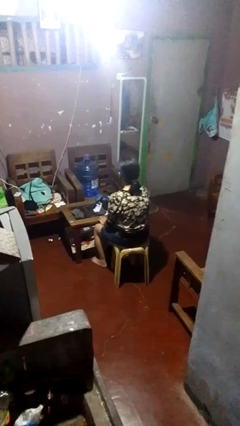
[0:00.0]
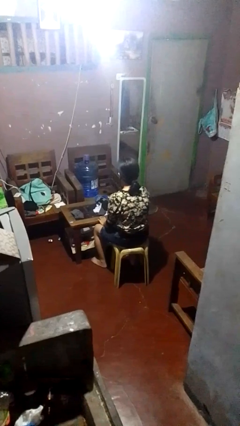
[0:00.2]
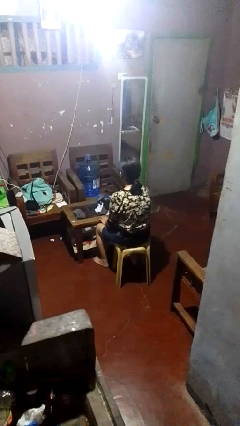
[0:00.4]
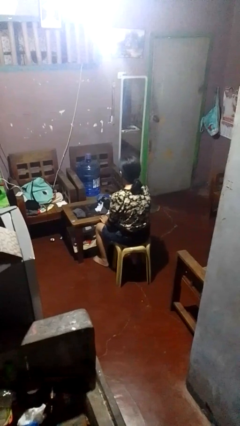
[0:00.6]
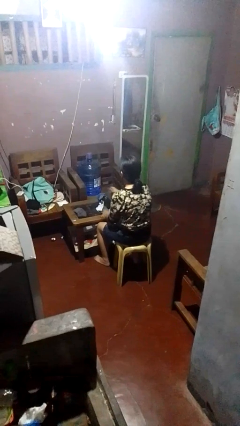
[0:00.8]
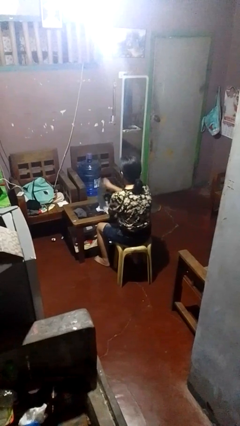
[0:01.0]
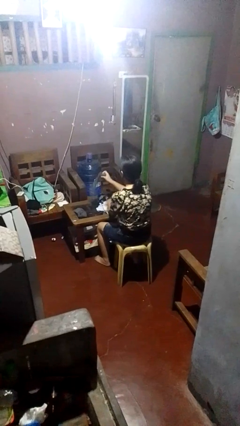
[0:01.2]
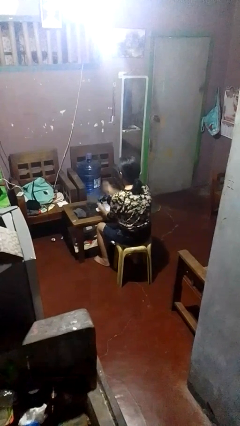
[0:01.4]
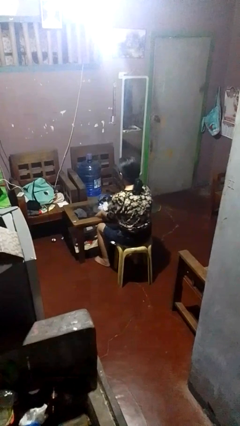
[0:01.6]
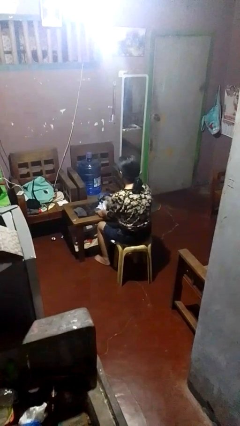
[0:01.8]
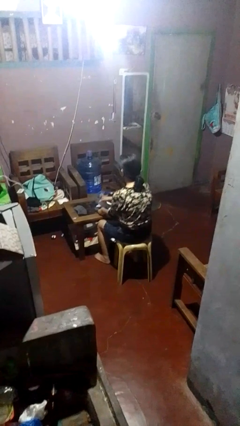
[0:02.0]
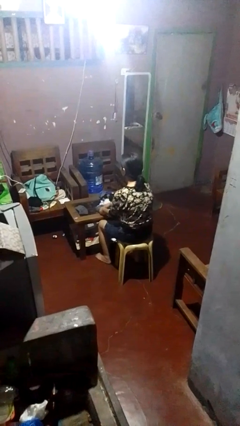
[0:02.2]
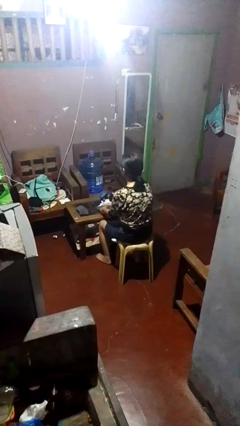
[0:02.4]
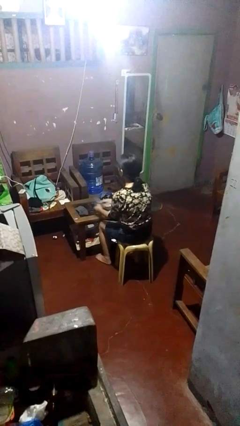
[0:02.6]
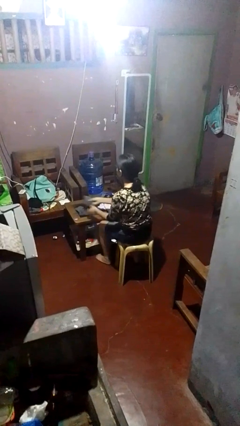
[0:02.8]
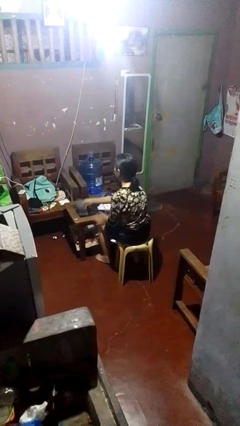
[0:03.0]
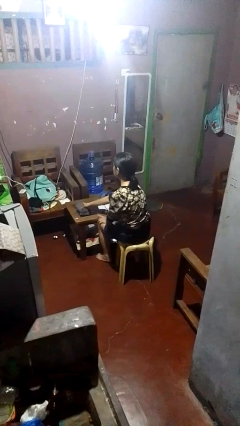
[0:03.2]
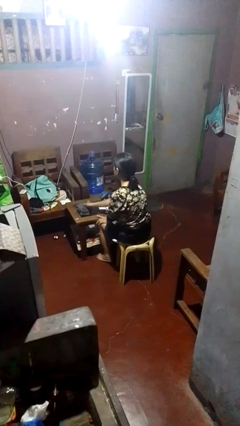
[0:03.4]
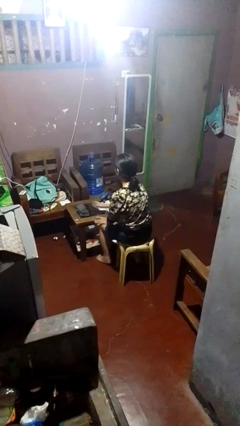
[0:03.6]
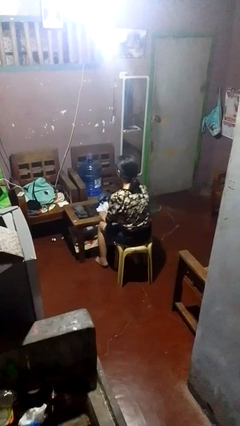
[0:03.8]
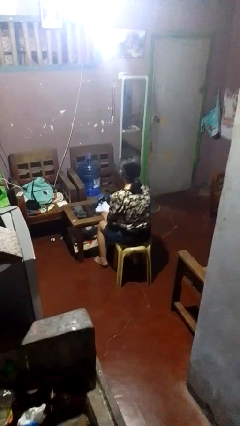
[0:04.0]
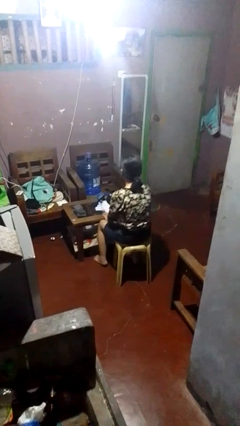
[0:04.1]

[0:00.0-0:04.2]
person folds socks

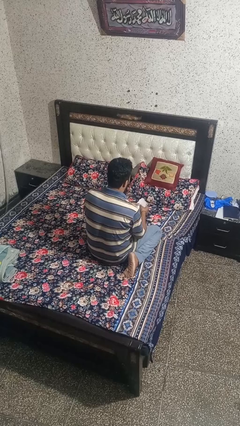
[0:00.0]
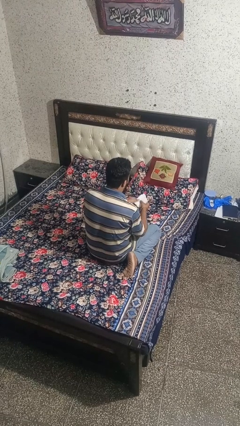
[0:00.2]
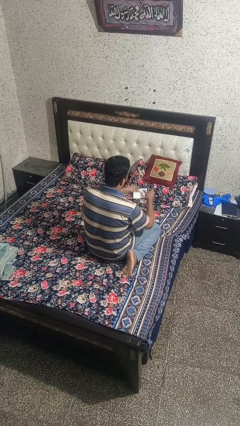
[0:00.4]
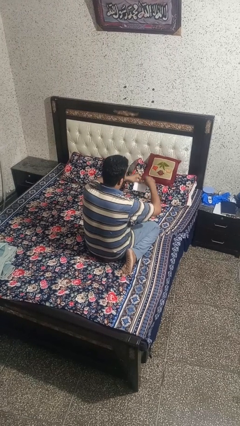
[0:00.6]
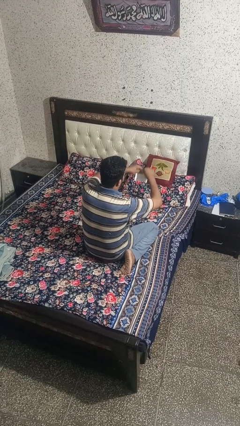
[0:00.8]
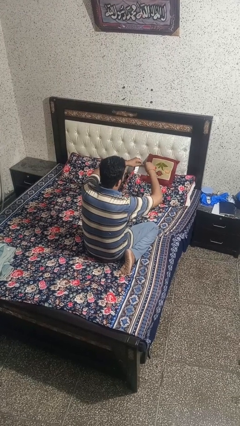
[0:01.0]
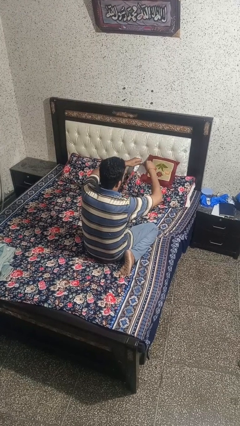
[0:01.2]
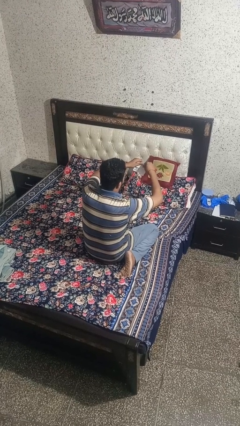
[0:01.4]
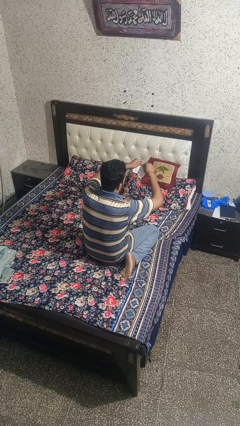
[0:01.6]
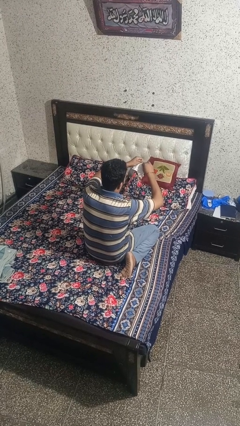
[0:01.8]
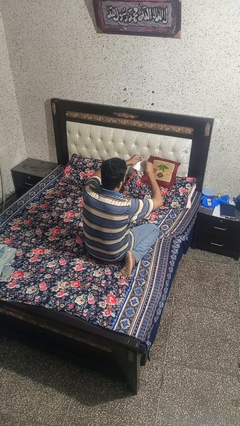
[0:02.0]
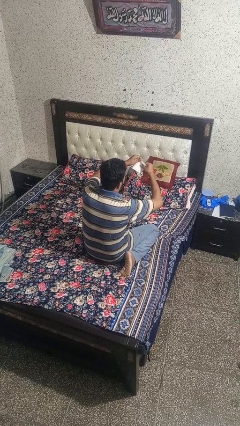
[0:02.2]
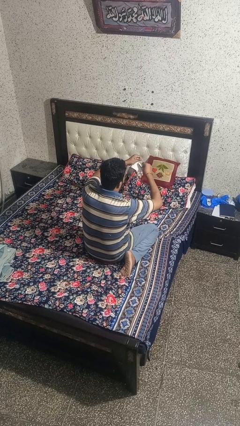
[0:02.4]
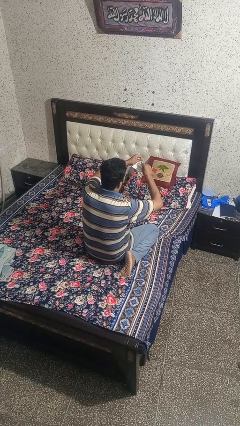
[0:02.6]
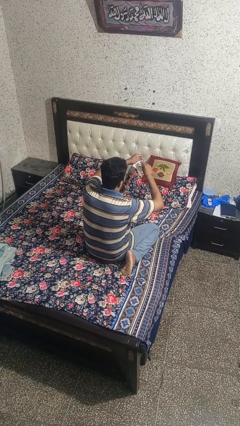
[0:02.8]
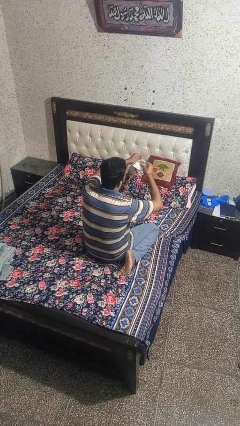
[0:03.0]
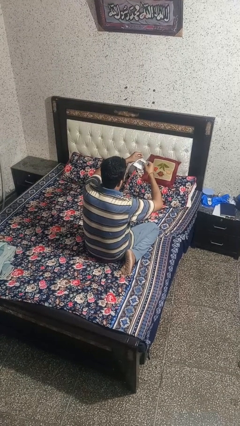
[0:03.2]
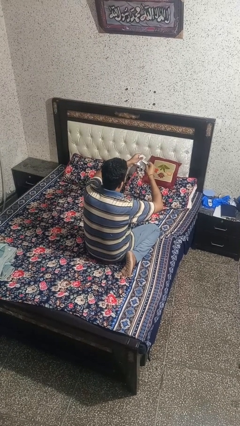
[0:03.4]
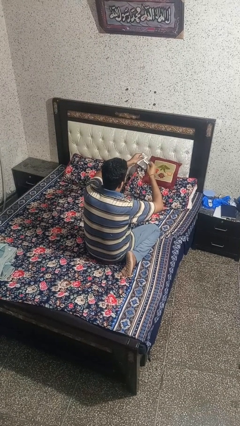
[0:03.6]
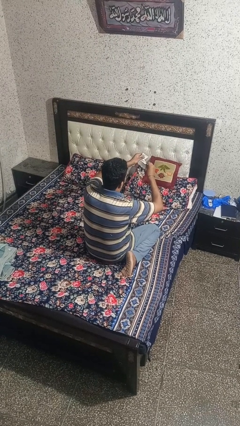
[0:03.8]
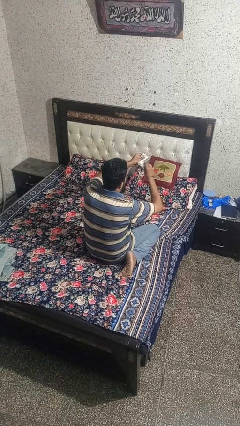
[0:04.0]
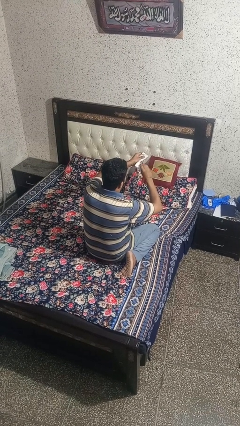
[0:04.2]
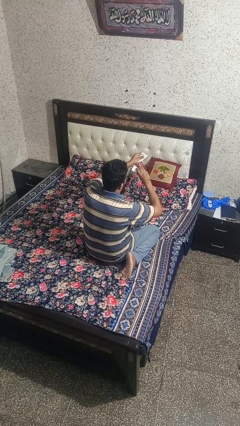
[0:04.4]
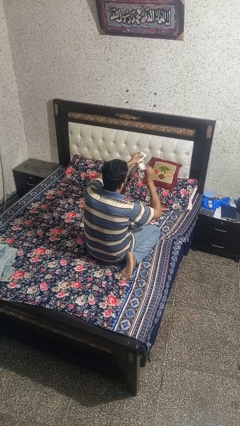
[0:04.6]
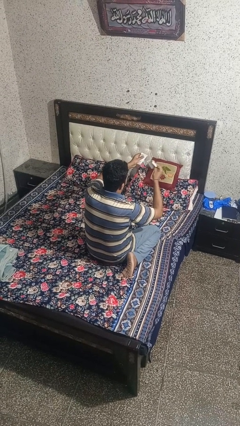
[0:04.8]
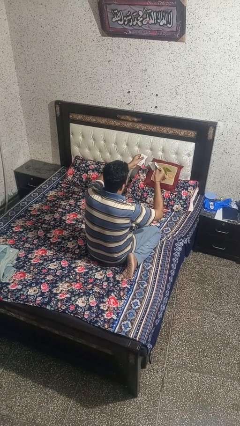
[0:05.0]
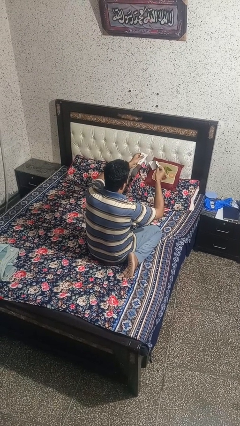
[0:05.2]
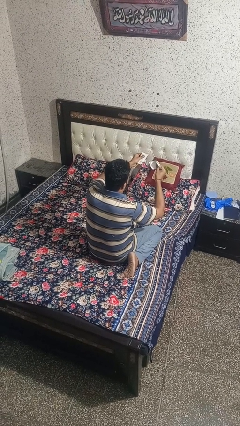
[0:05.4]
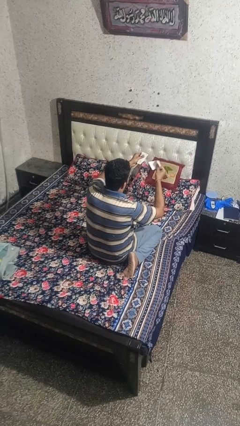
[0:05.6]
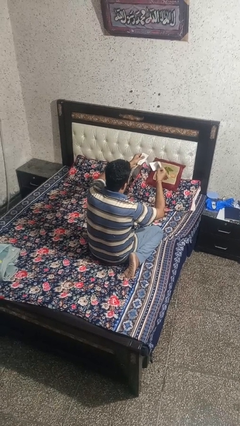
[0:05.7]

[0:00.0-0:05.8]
person tears paper

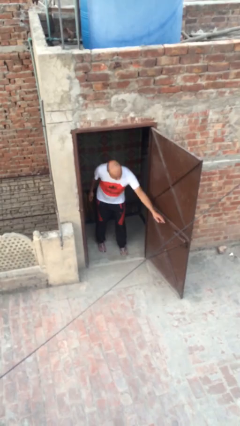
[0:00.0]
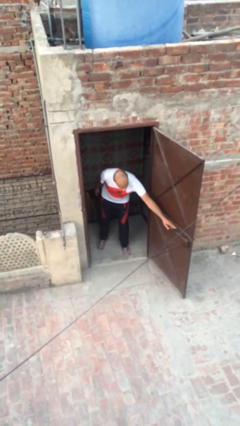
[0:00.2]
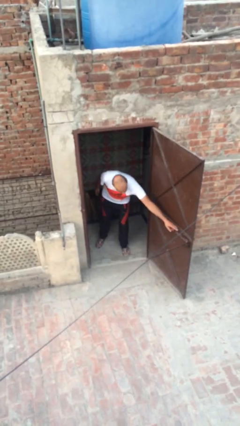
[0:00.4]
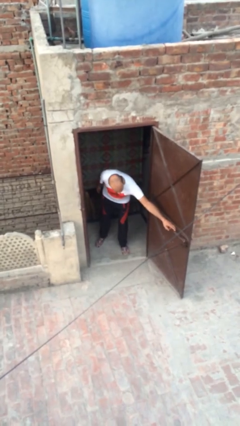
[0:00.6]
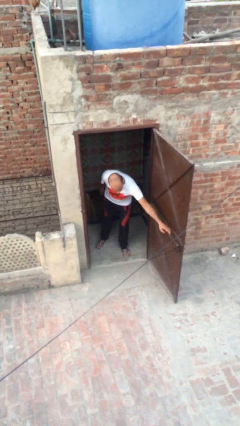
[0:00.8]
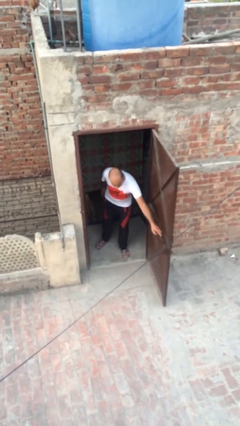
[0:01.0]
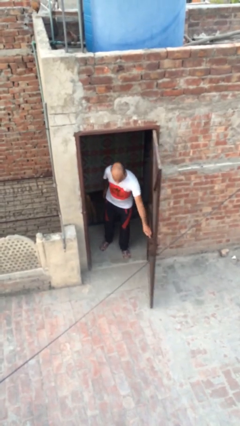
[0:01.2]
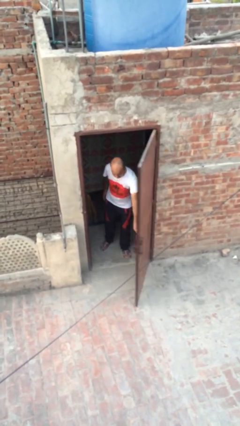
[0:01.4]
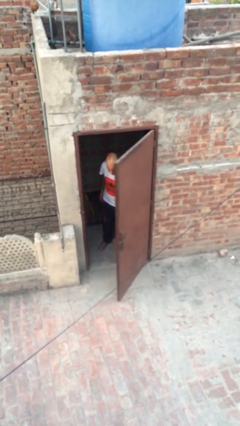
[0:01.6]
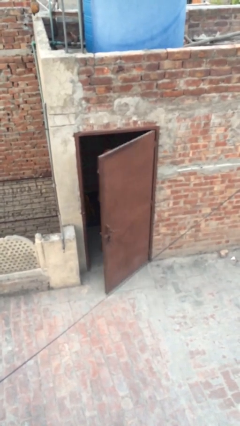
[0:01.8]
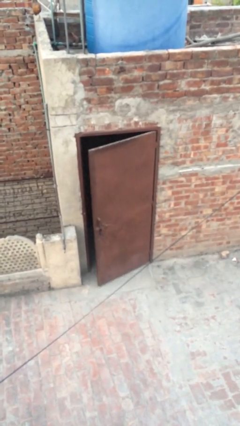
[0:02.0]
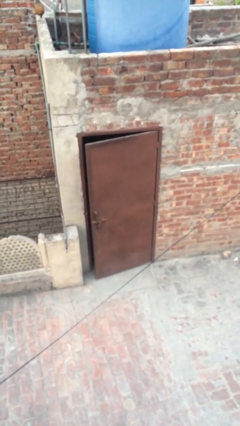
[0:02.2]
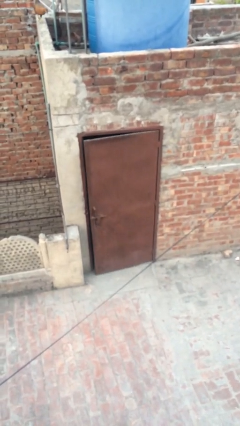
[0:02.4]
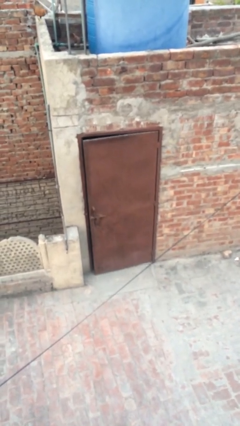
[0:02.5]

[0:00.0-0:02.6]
person closes facility door

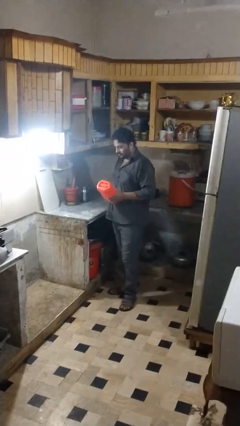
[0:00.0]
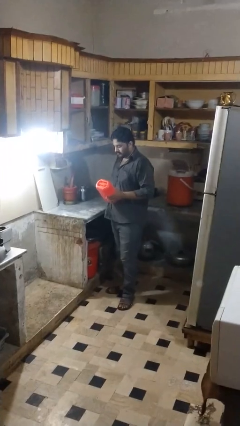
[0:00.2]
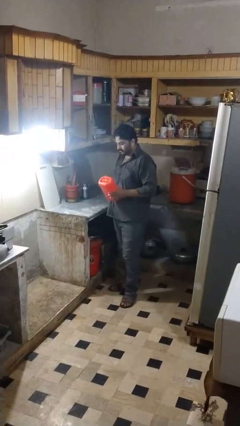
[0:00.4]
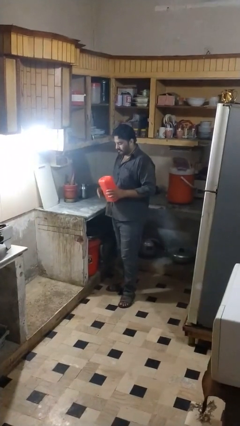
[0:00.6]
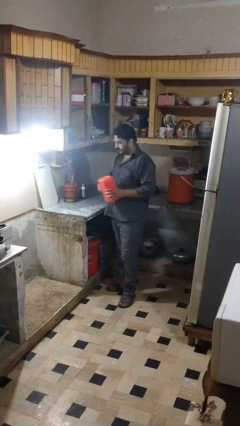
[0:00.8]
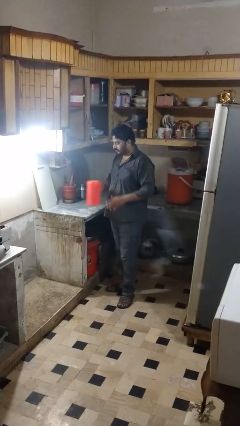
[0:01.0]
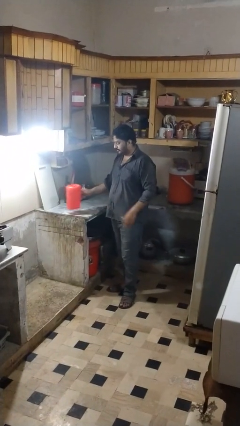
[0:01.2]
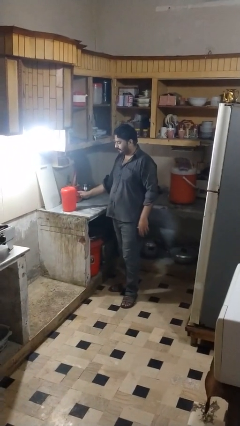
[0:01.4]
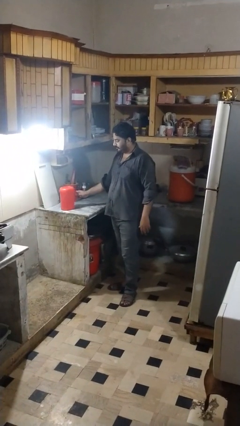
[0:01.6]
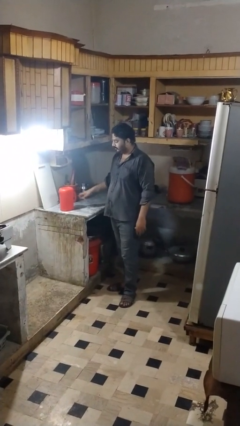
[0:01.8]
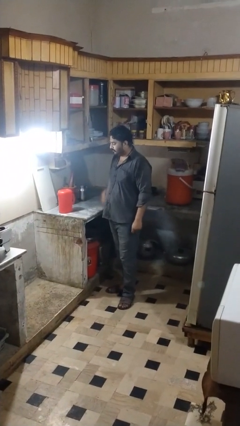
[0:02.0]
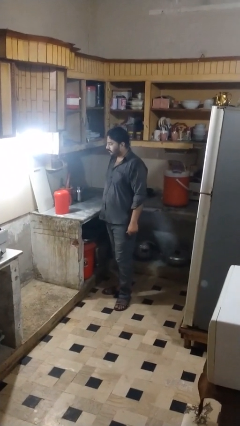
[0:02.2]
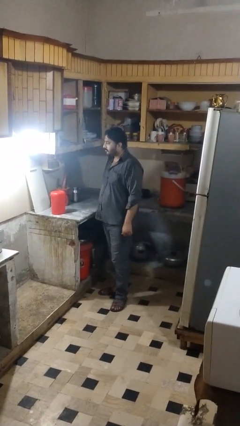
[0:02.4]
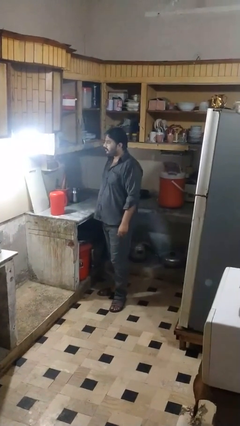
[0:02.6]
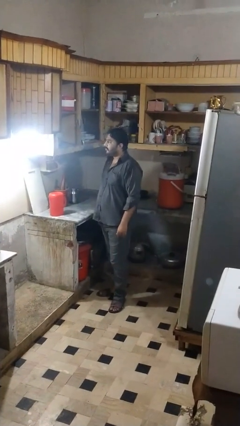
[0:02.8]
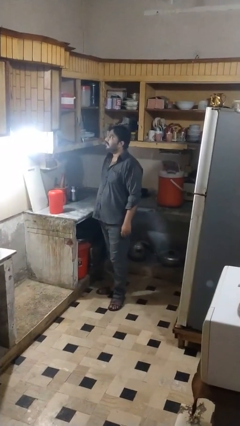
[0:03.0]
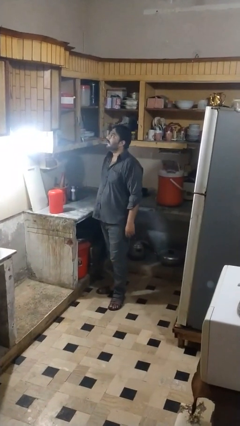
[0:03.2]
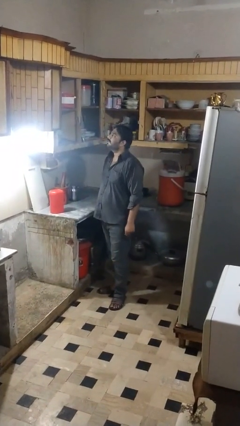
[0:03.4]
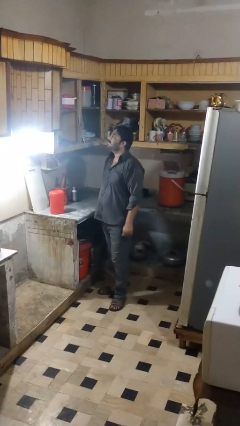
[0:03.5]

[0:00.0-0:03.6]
person puts down object on countertop

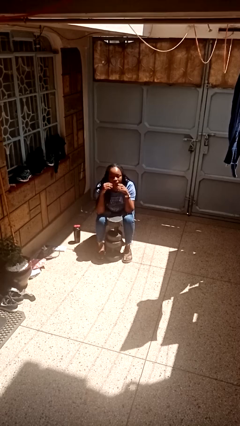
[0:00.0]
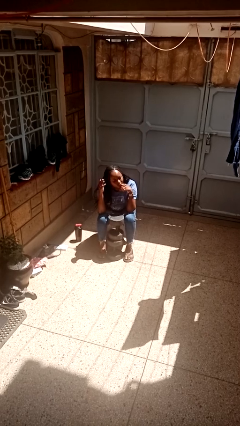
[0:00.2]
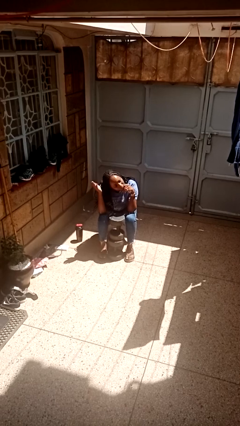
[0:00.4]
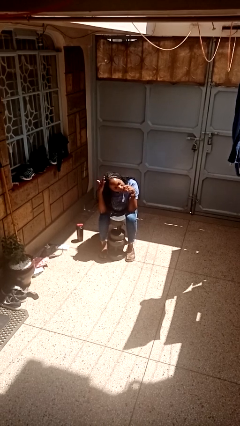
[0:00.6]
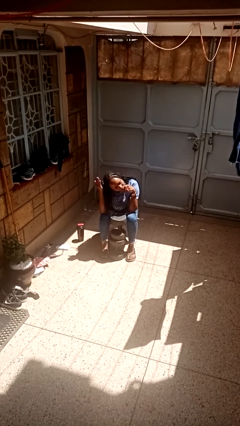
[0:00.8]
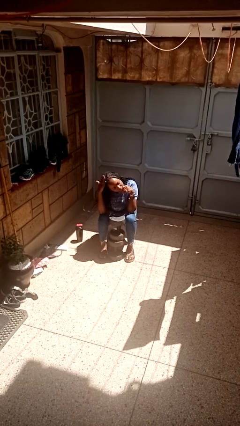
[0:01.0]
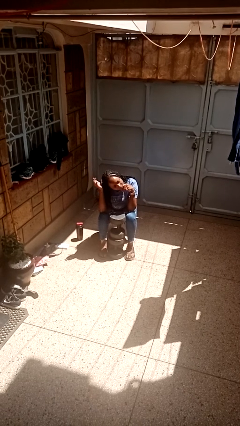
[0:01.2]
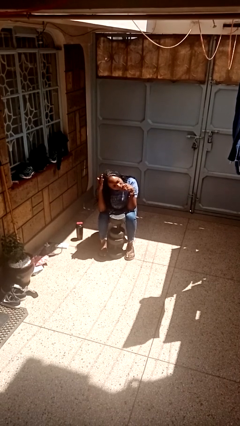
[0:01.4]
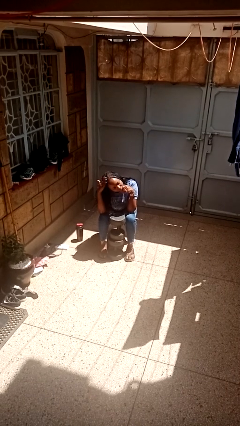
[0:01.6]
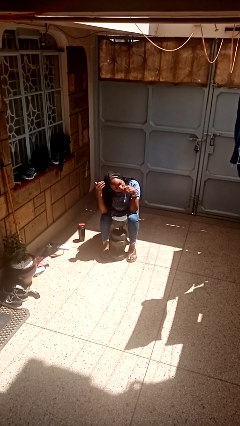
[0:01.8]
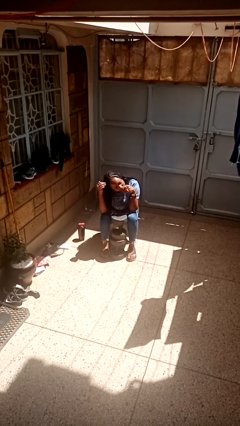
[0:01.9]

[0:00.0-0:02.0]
person pats head
